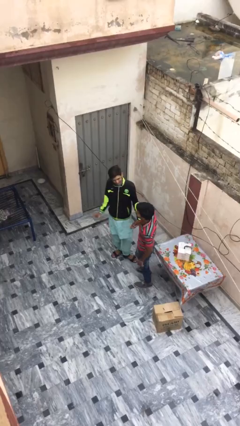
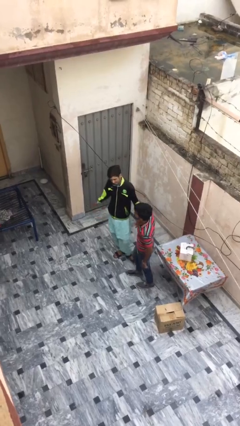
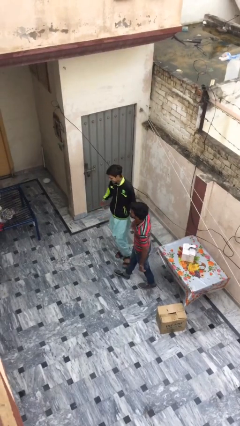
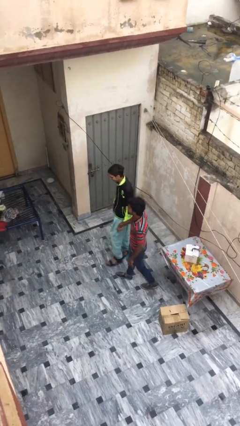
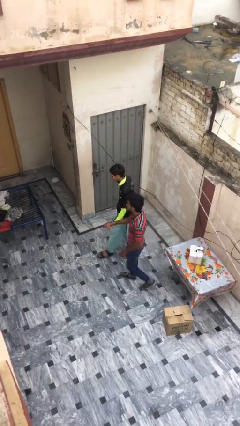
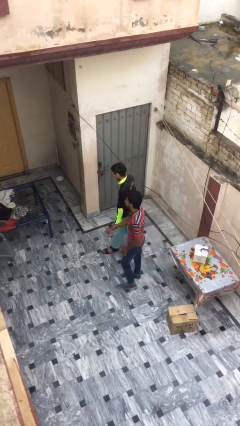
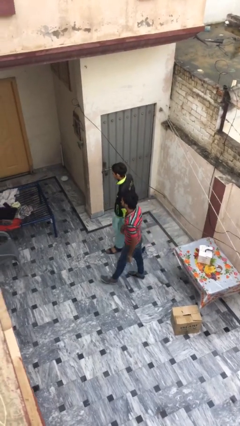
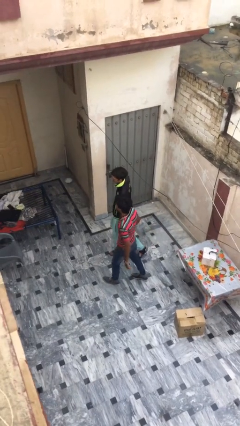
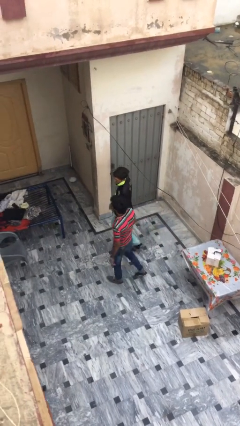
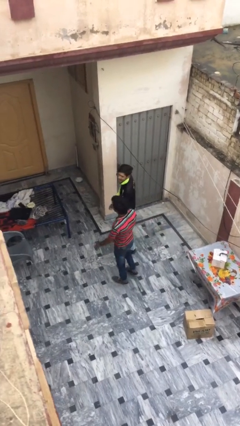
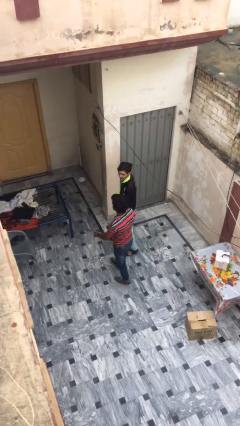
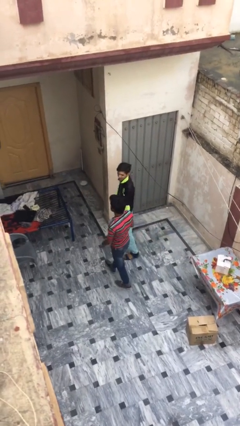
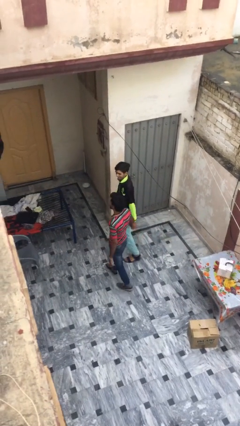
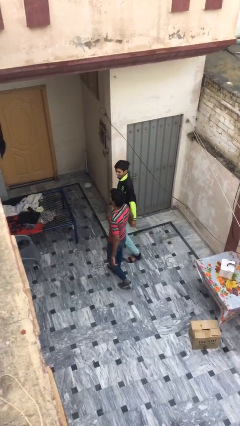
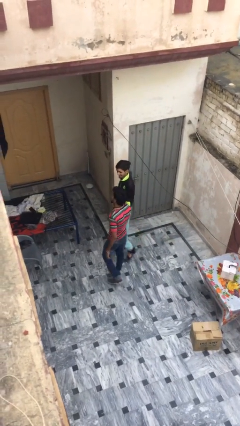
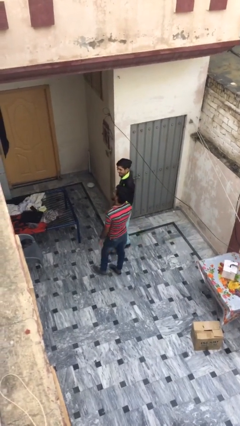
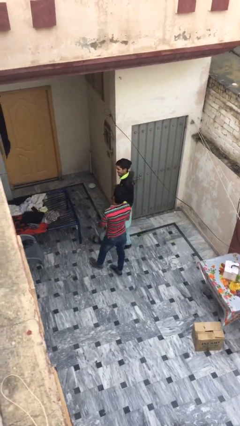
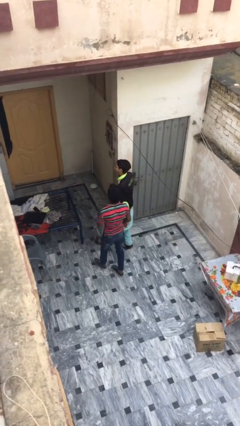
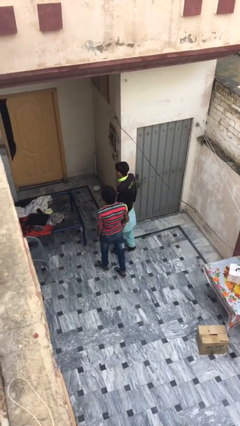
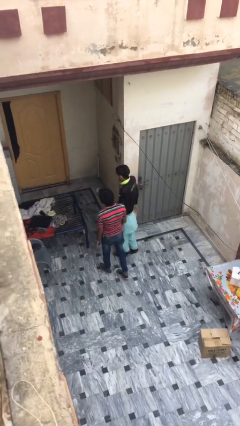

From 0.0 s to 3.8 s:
person talks to person

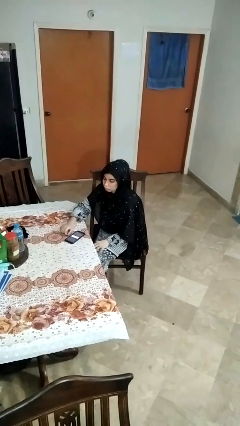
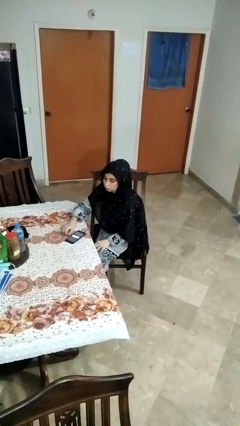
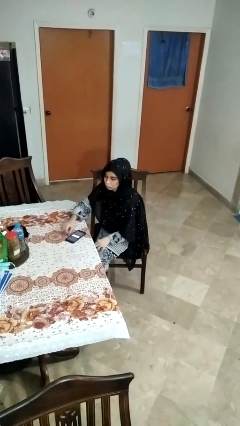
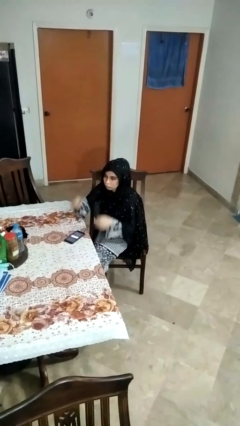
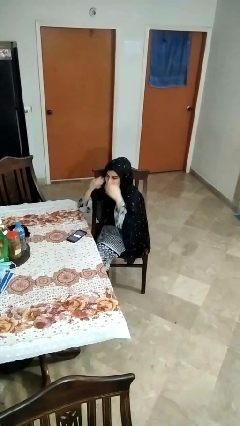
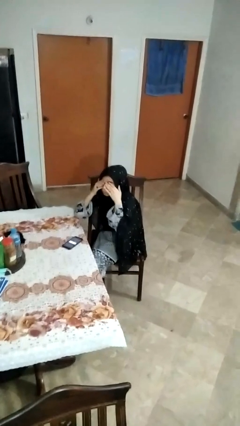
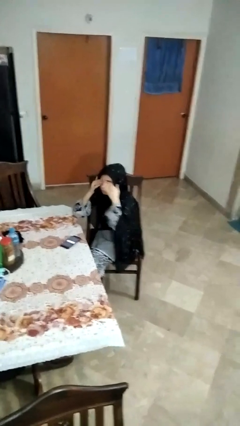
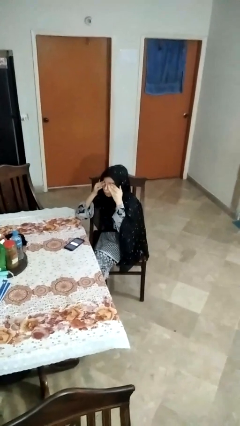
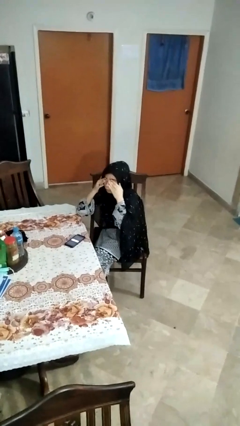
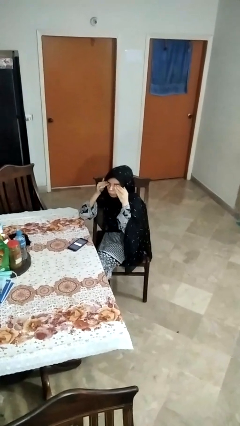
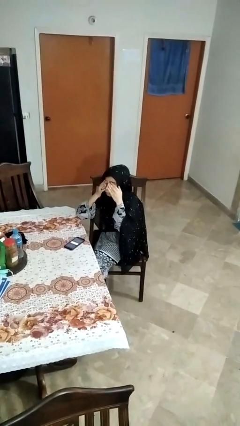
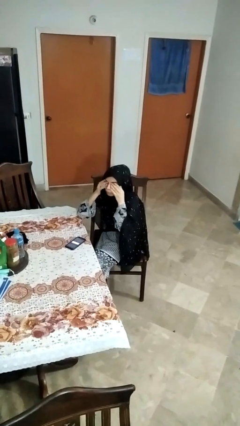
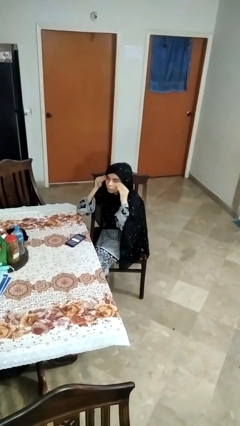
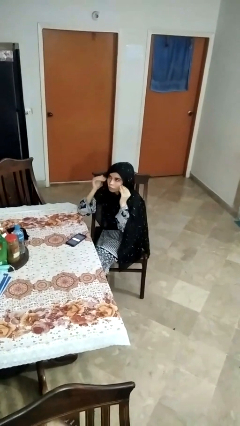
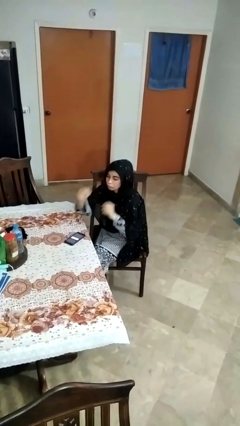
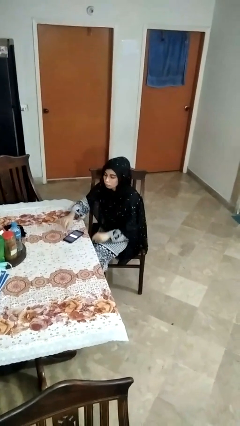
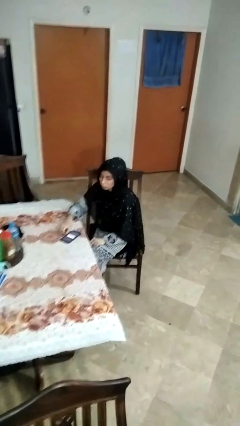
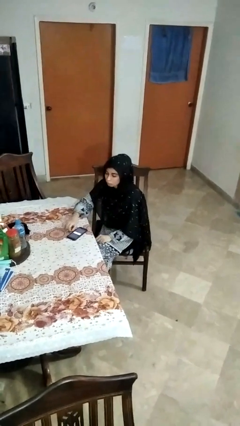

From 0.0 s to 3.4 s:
person rubs eyes

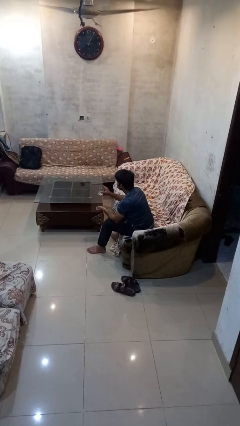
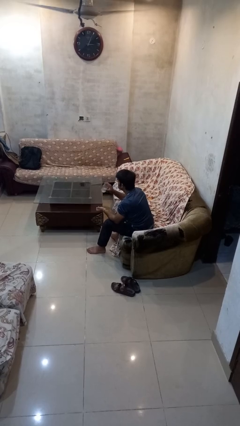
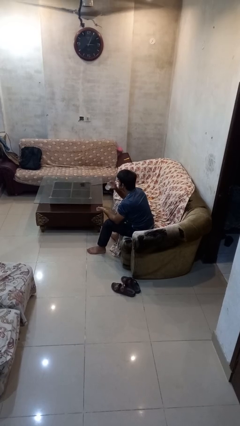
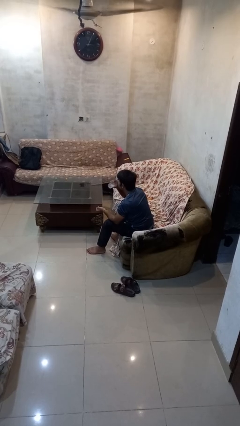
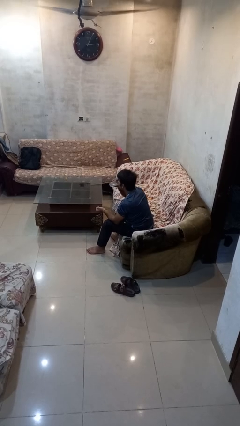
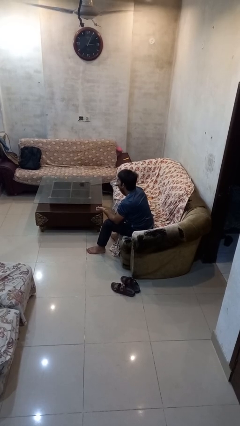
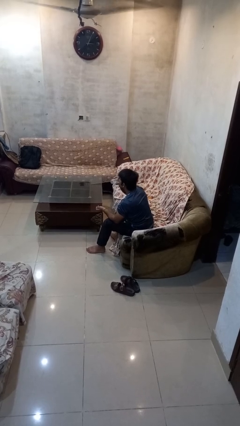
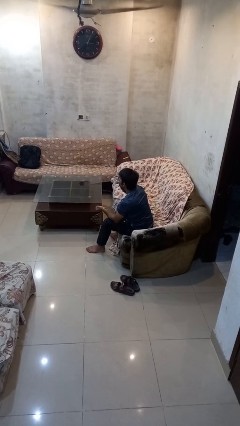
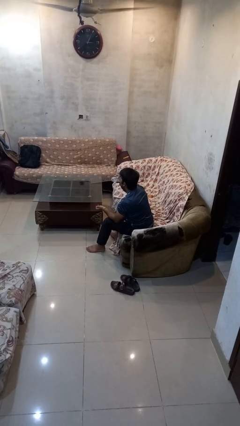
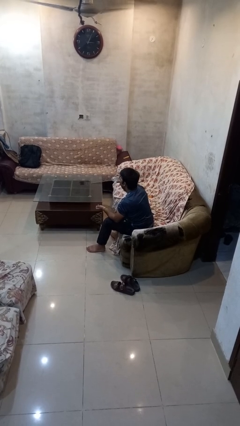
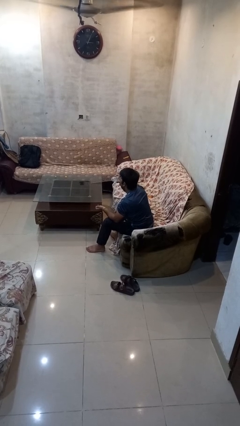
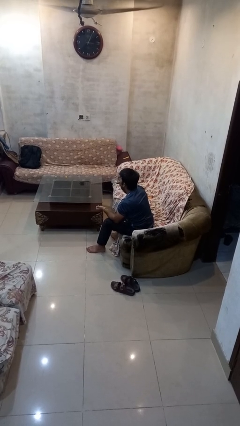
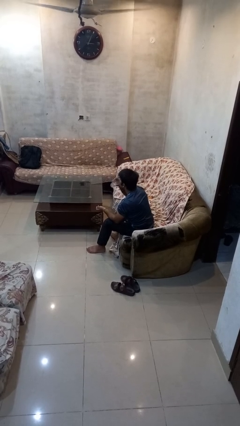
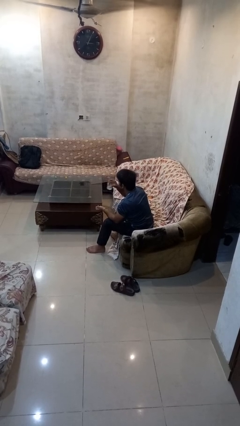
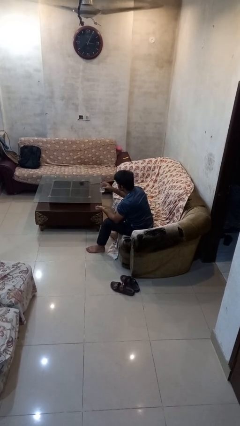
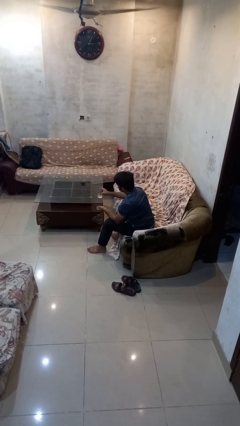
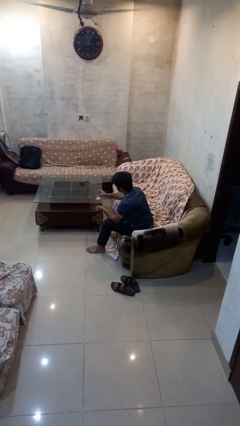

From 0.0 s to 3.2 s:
person drinks from cup

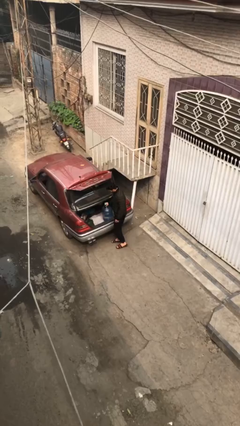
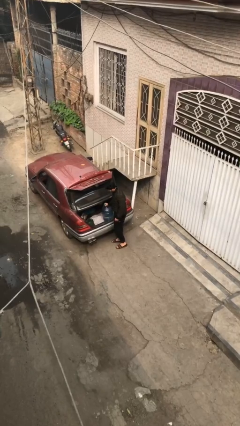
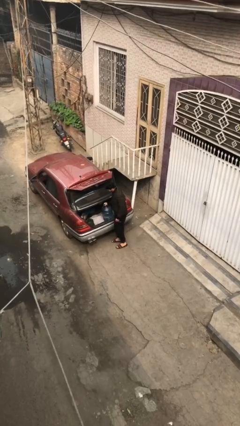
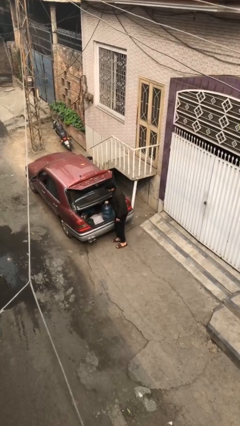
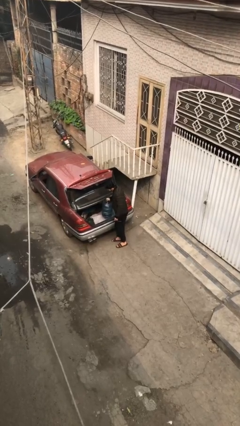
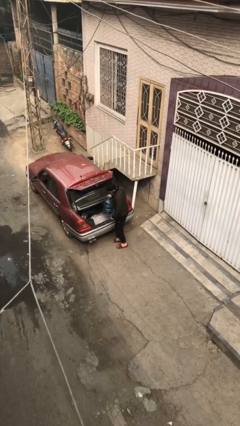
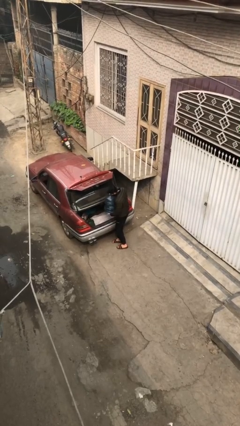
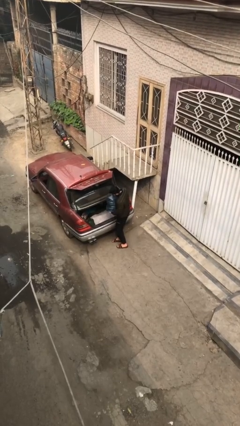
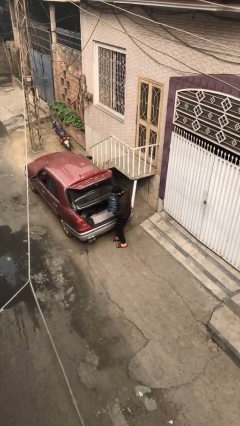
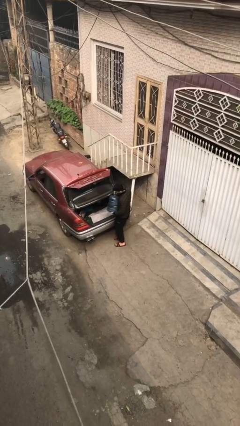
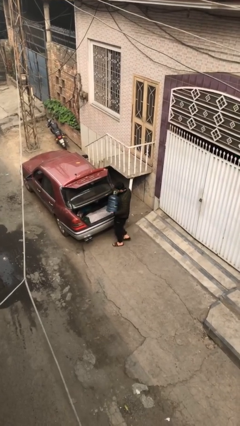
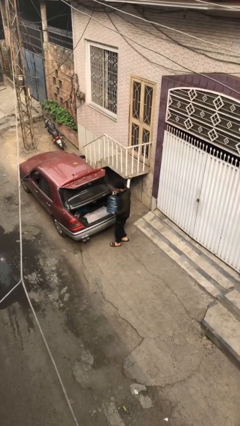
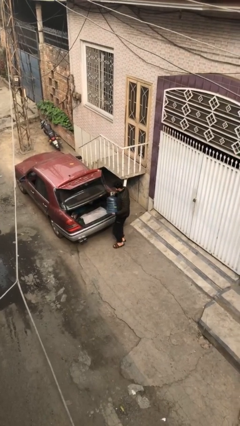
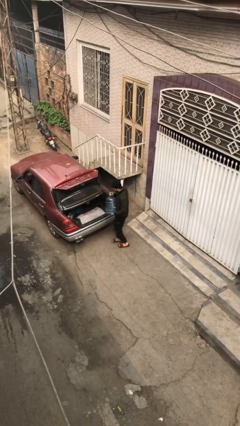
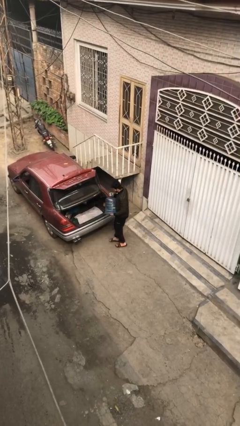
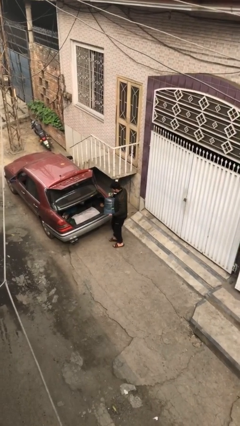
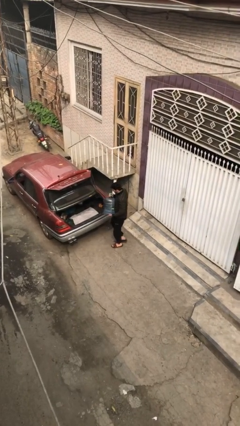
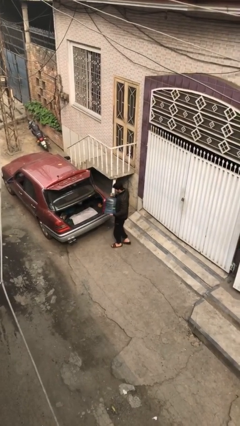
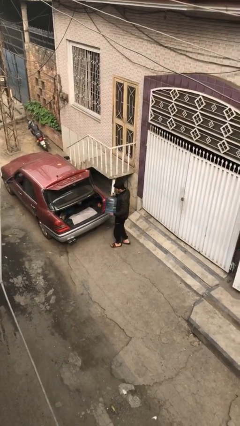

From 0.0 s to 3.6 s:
person unloads car

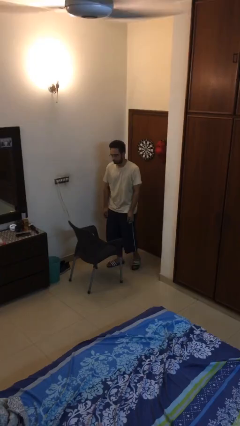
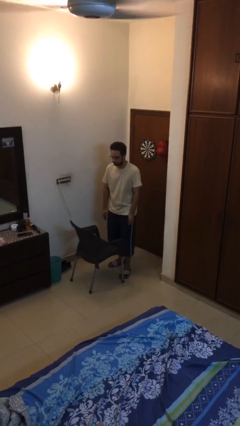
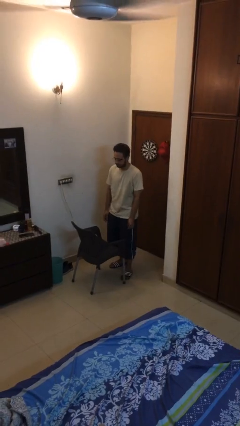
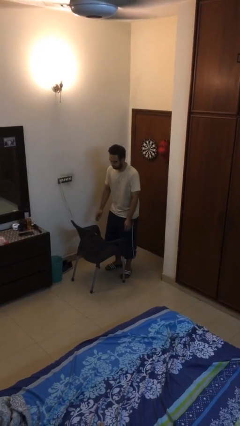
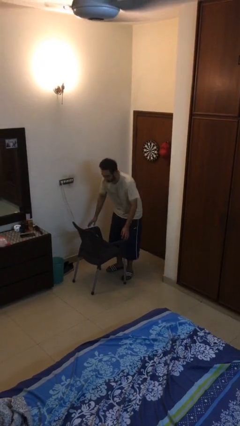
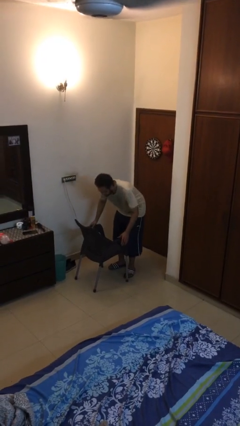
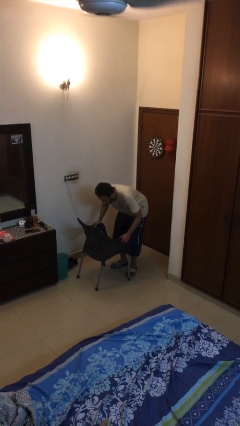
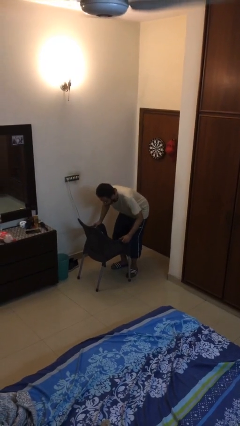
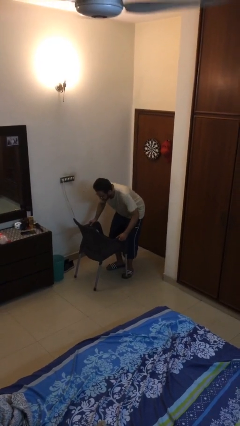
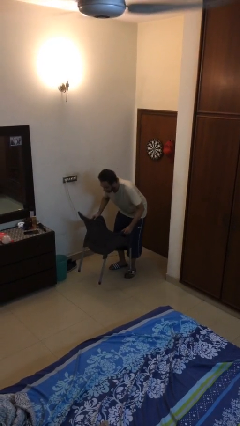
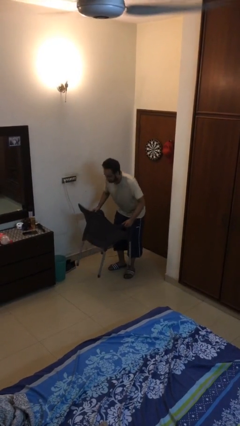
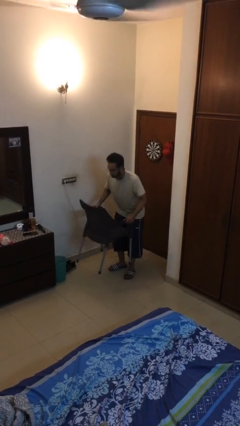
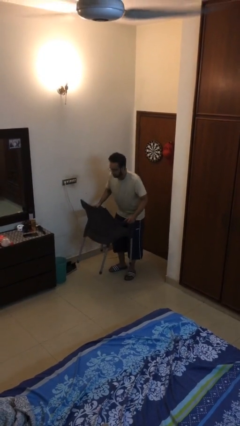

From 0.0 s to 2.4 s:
person picks up object from floor

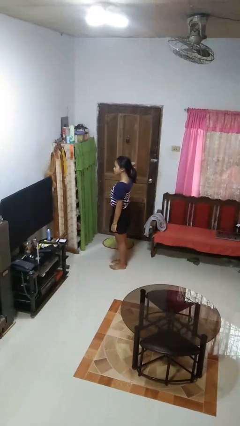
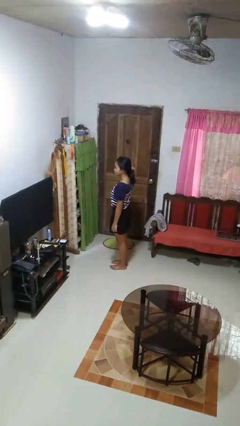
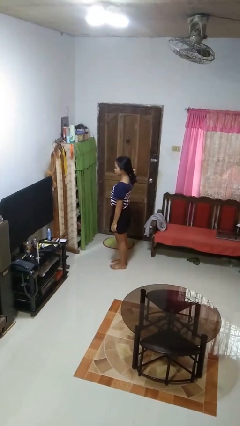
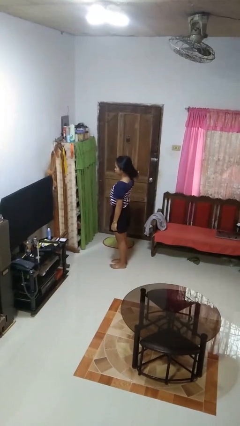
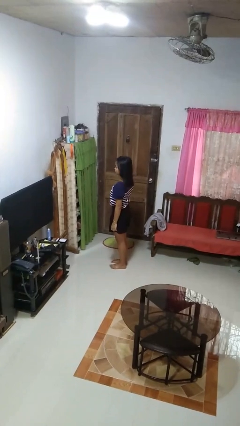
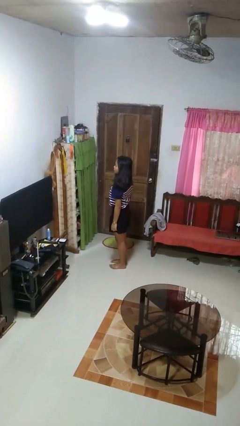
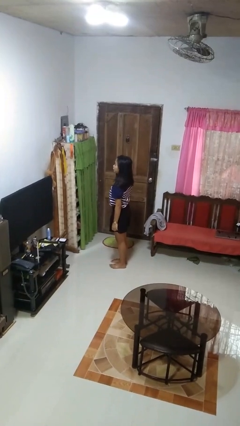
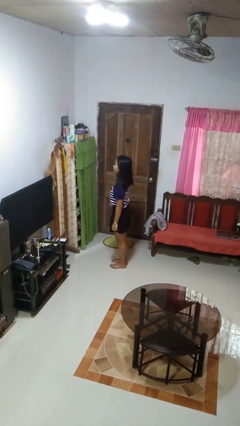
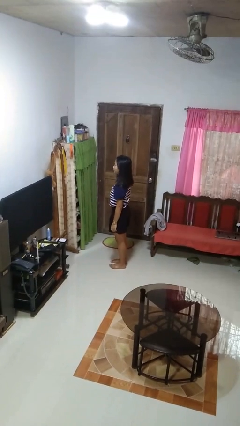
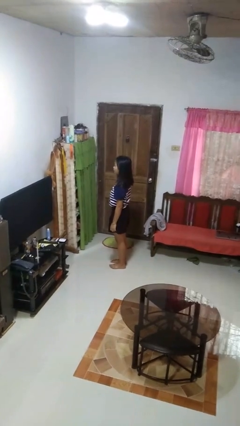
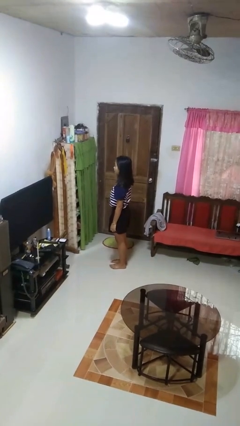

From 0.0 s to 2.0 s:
person takes off hairtie
